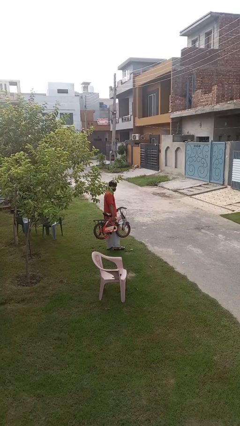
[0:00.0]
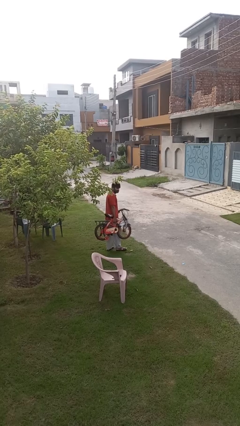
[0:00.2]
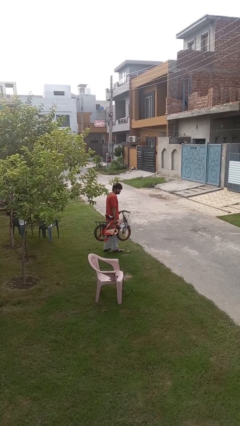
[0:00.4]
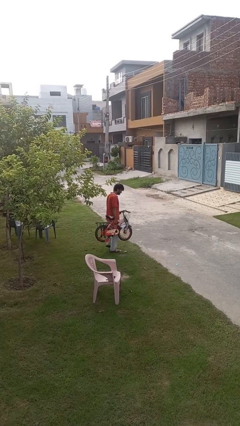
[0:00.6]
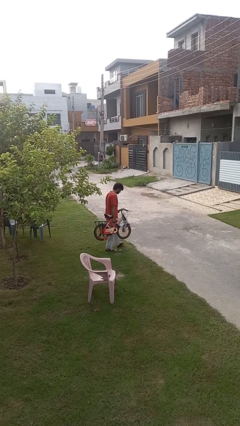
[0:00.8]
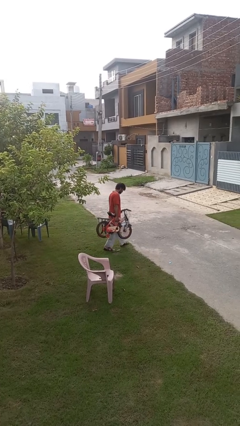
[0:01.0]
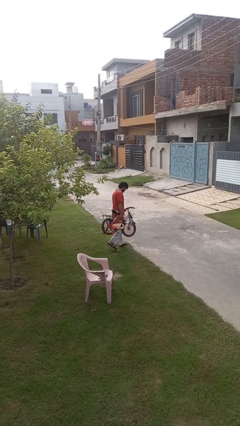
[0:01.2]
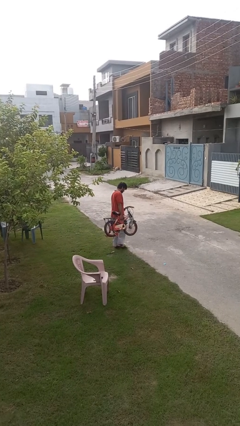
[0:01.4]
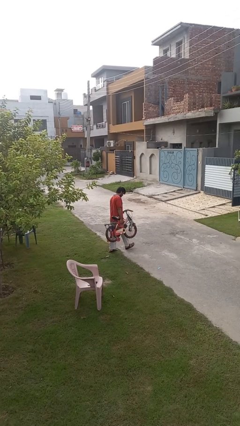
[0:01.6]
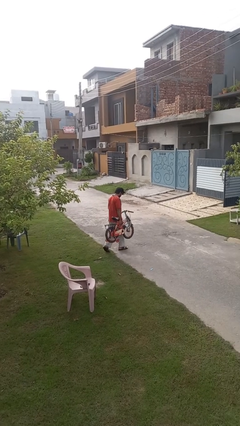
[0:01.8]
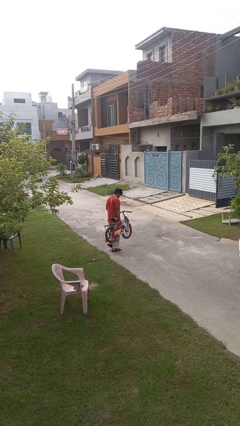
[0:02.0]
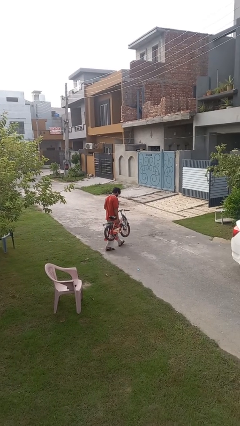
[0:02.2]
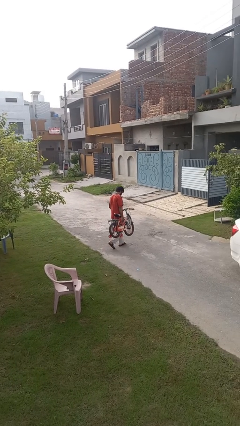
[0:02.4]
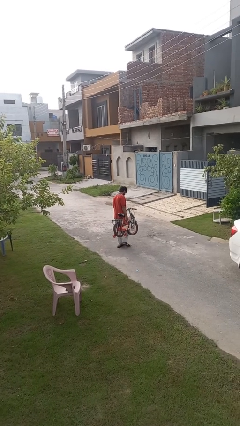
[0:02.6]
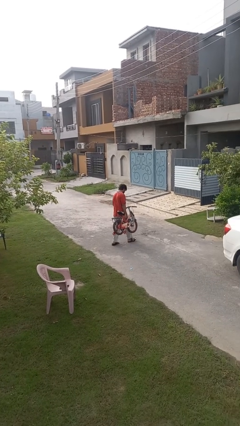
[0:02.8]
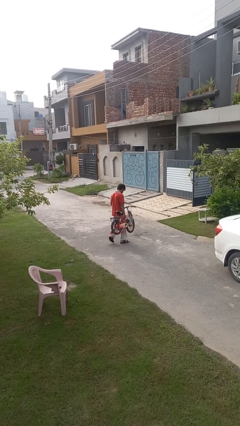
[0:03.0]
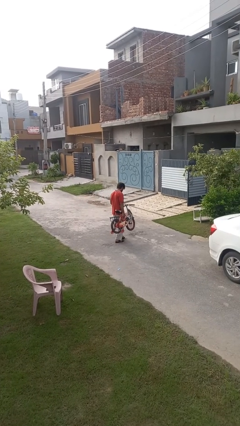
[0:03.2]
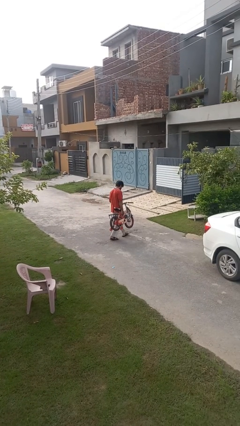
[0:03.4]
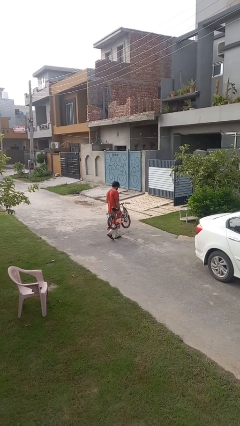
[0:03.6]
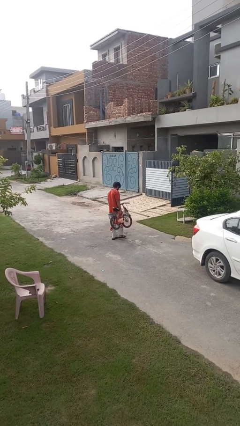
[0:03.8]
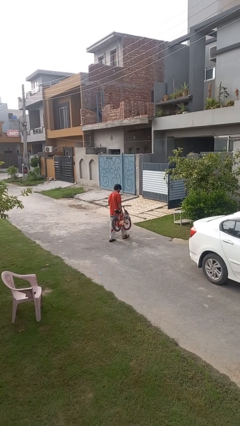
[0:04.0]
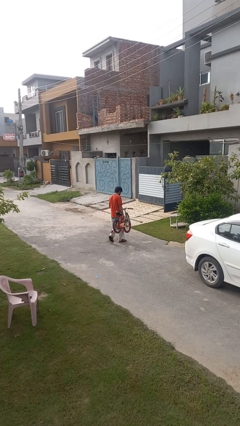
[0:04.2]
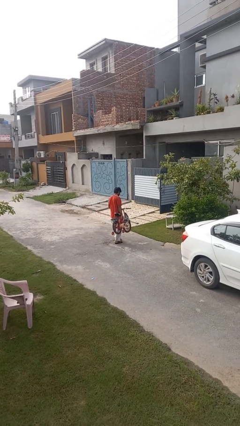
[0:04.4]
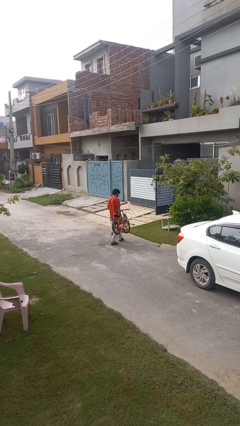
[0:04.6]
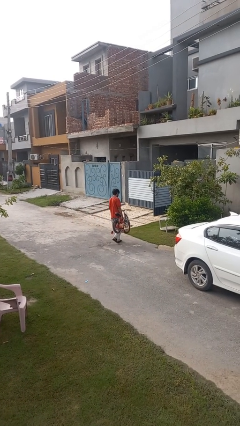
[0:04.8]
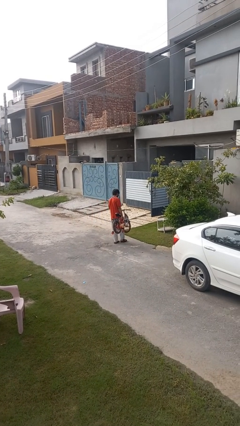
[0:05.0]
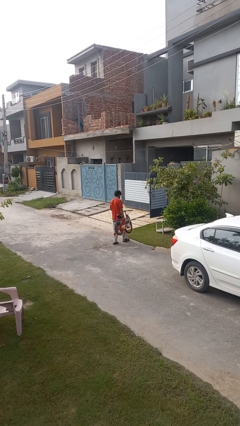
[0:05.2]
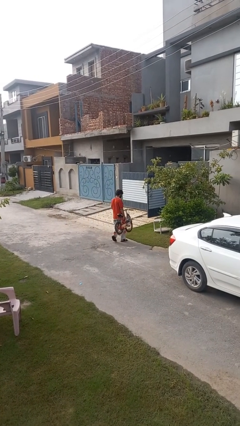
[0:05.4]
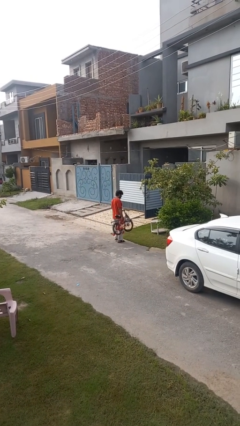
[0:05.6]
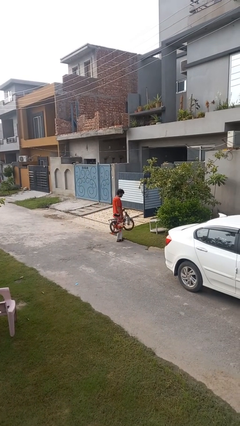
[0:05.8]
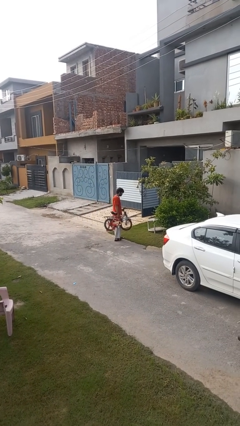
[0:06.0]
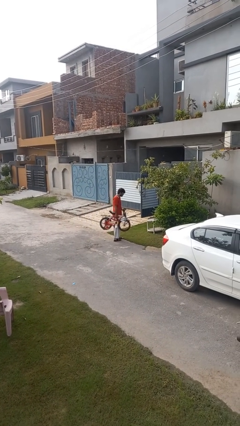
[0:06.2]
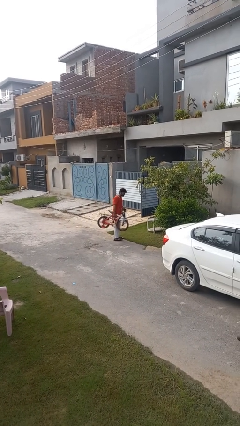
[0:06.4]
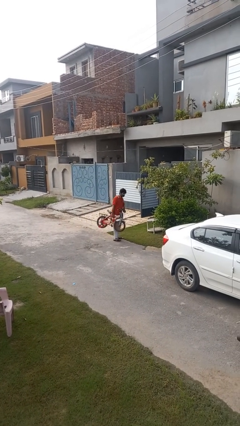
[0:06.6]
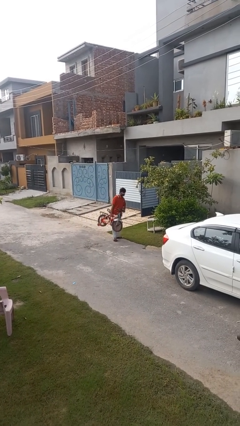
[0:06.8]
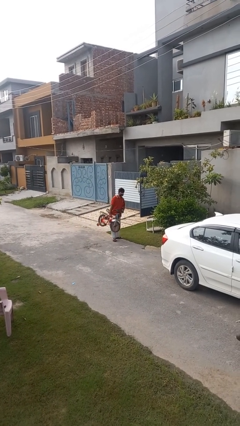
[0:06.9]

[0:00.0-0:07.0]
person carries bicycle

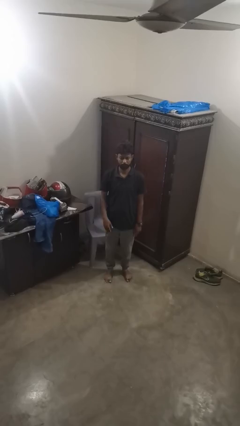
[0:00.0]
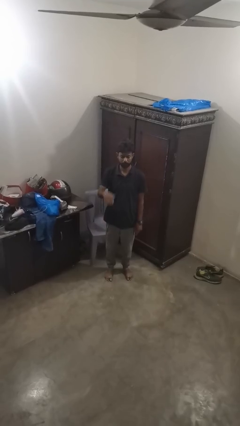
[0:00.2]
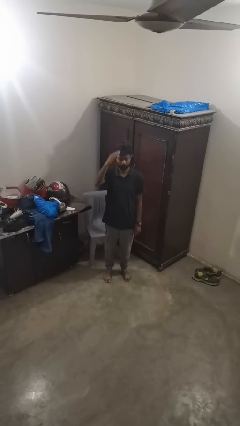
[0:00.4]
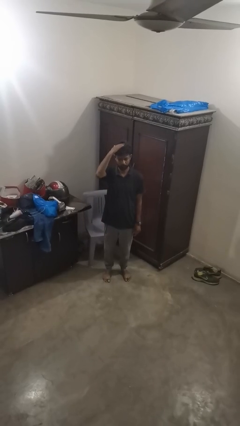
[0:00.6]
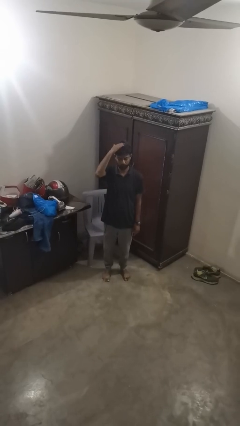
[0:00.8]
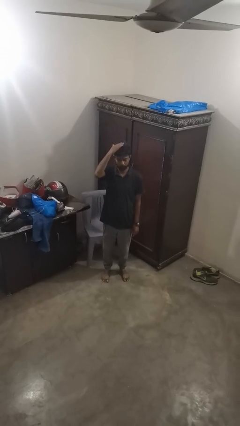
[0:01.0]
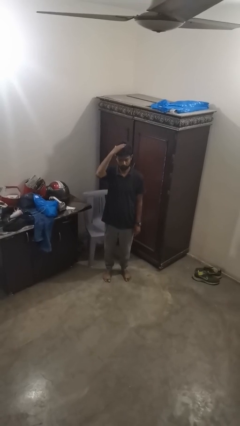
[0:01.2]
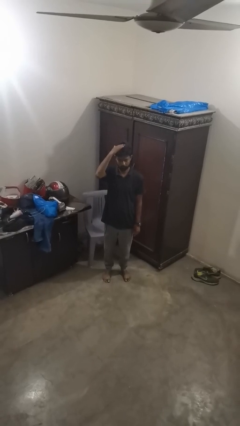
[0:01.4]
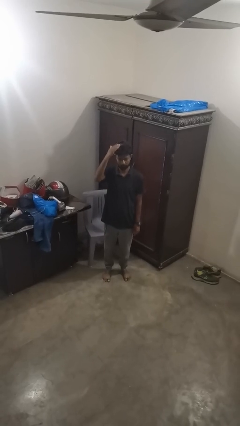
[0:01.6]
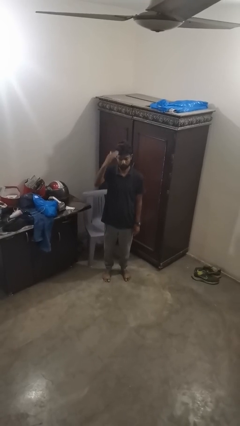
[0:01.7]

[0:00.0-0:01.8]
person pats head

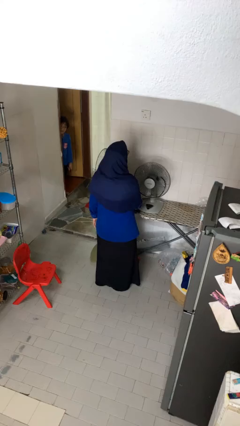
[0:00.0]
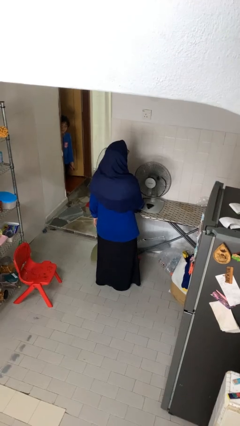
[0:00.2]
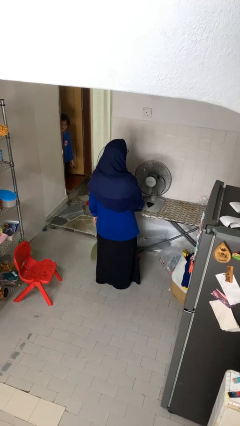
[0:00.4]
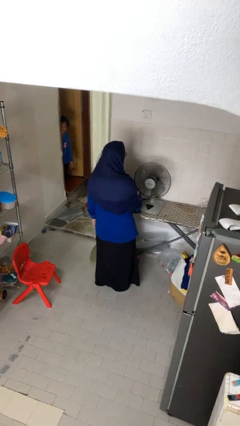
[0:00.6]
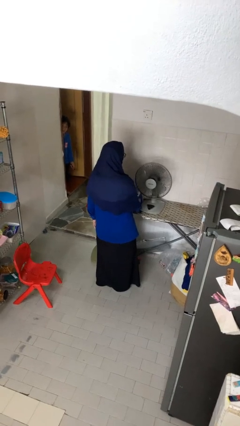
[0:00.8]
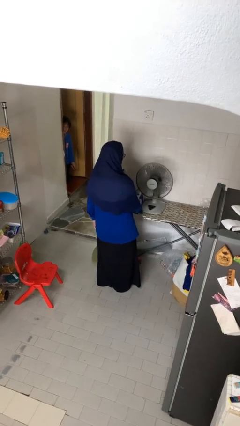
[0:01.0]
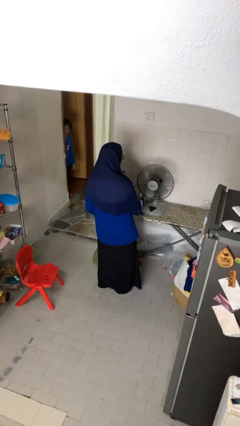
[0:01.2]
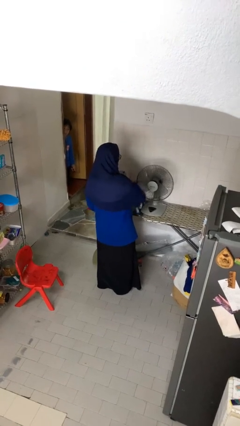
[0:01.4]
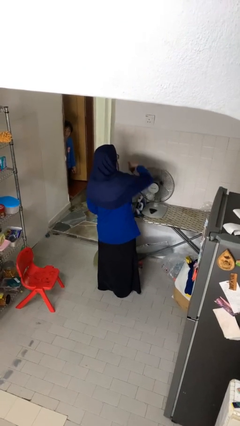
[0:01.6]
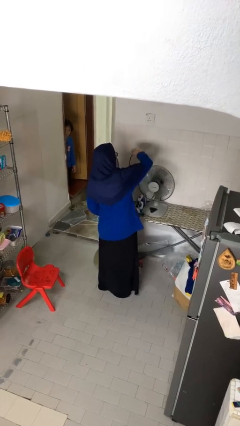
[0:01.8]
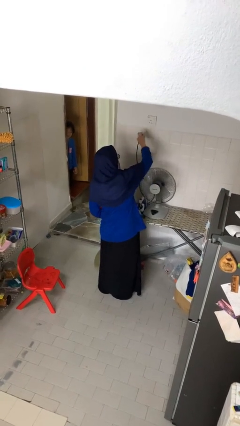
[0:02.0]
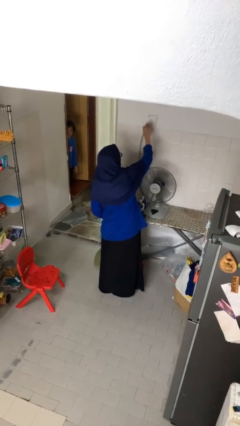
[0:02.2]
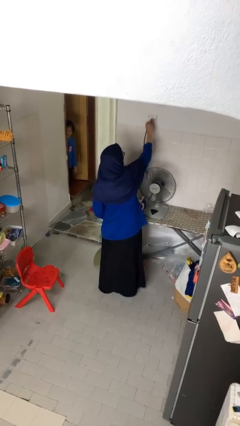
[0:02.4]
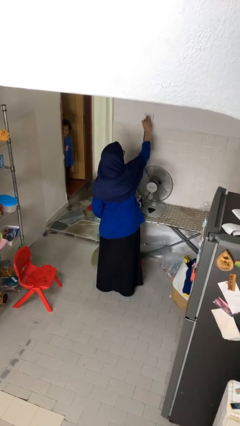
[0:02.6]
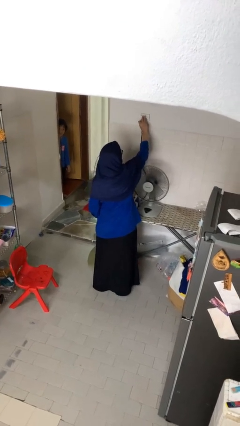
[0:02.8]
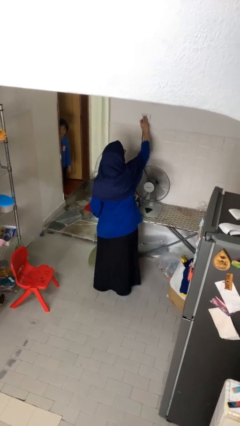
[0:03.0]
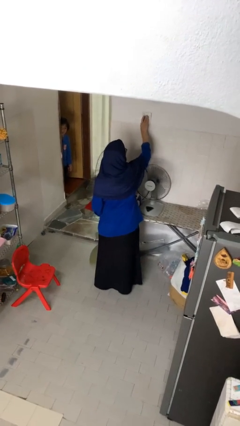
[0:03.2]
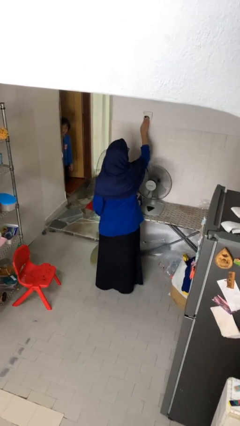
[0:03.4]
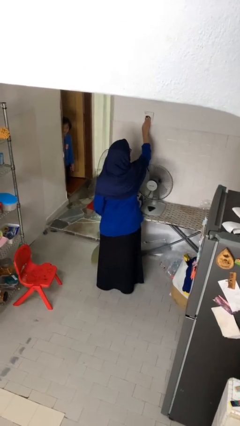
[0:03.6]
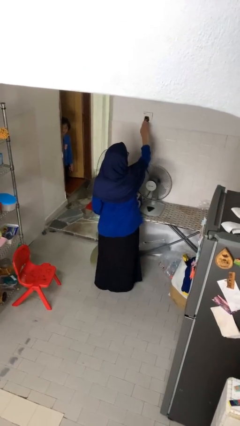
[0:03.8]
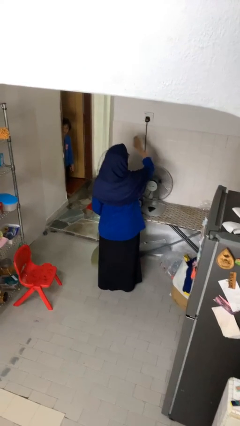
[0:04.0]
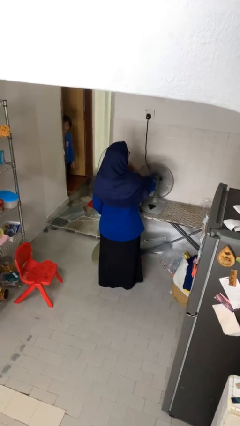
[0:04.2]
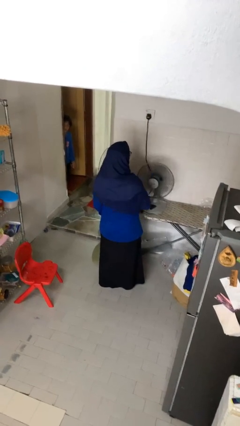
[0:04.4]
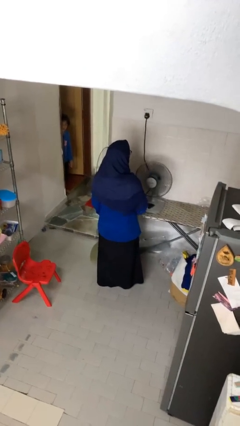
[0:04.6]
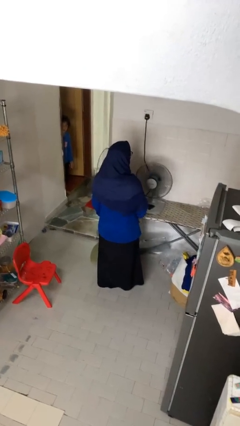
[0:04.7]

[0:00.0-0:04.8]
person plugs into electrical socket

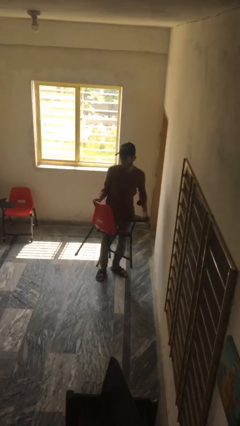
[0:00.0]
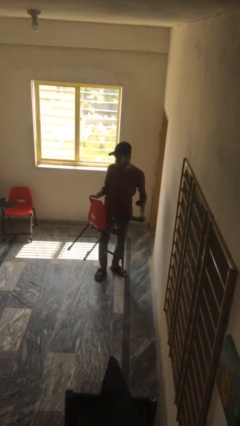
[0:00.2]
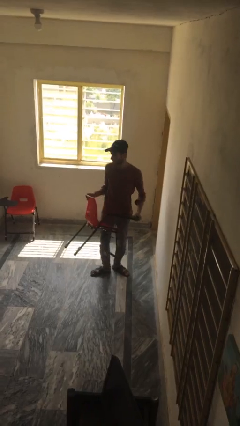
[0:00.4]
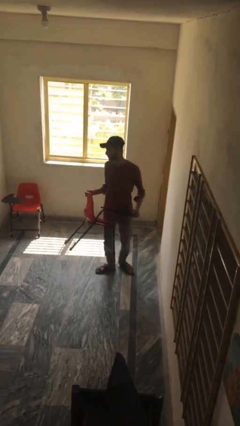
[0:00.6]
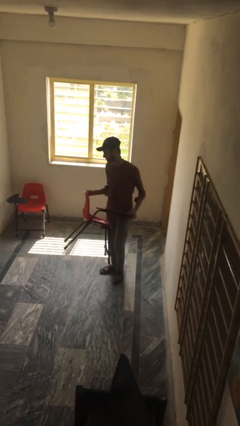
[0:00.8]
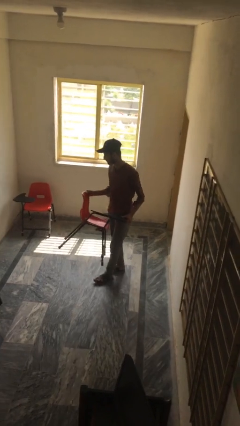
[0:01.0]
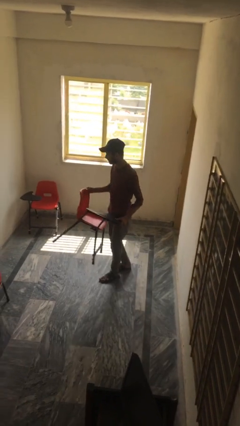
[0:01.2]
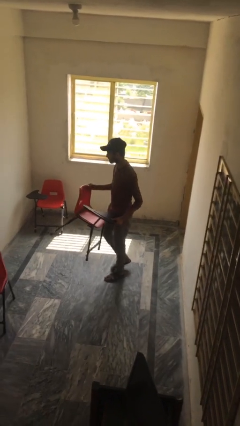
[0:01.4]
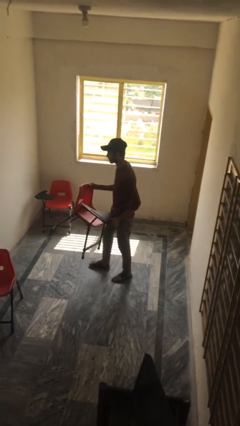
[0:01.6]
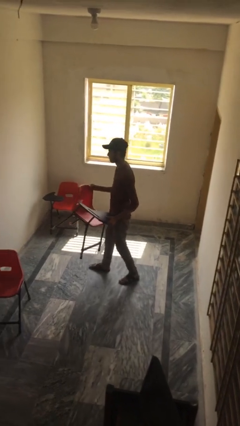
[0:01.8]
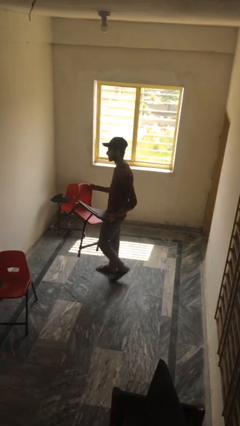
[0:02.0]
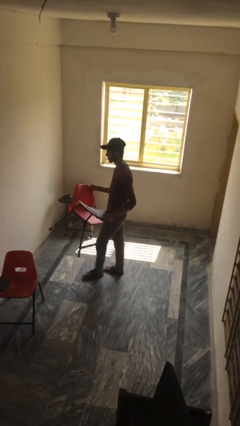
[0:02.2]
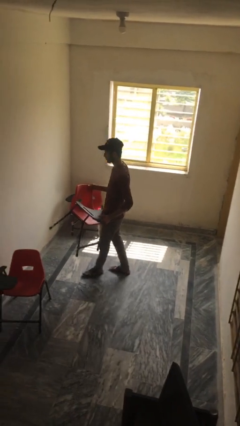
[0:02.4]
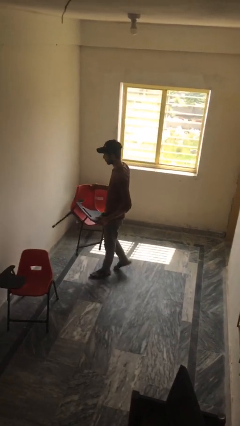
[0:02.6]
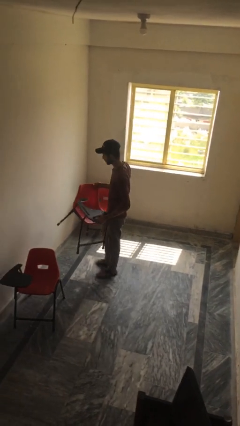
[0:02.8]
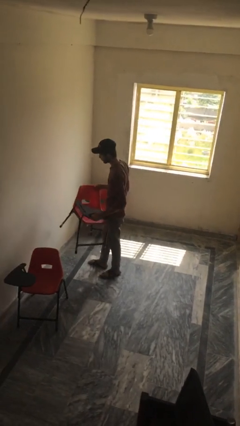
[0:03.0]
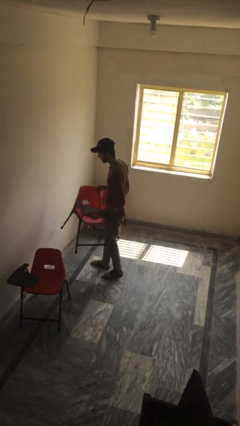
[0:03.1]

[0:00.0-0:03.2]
person carries heavy object

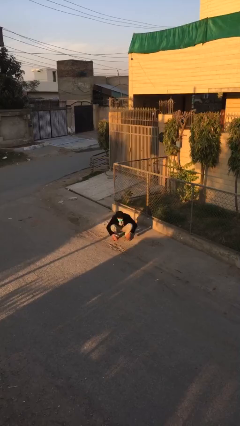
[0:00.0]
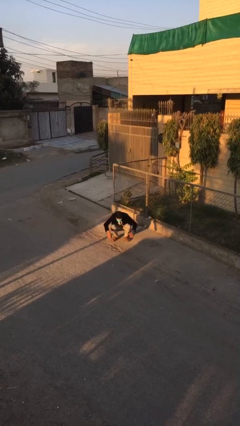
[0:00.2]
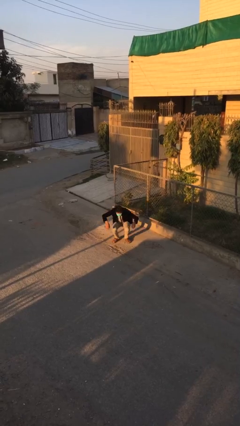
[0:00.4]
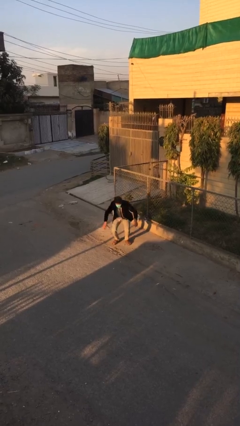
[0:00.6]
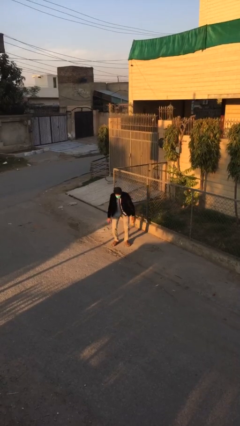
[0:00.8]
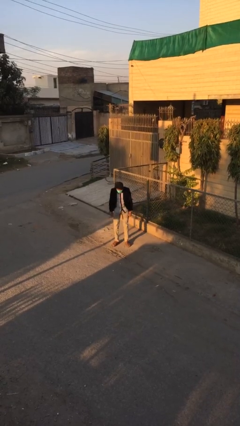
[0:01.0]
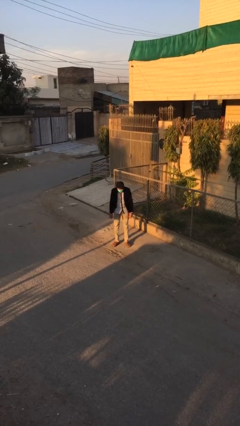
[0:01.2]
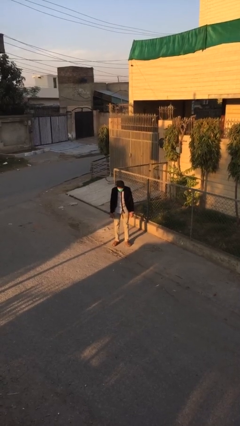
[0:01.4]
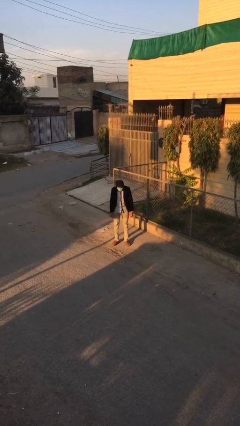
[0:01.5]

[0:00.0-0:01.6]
person stands up
